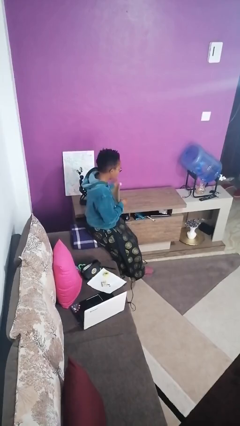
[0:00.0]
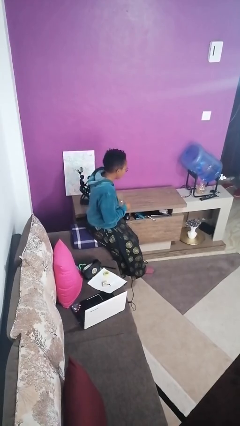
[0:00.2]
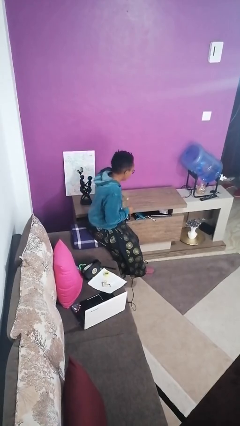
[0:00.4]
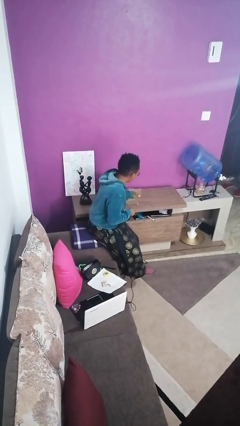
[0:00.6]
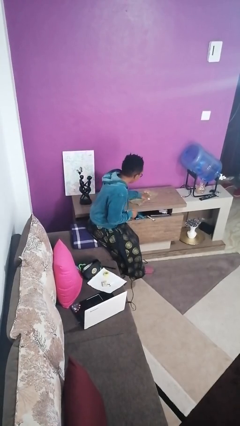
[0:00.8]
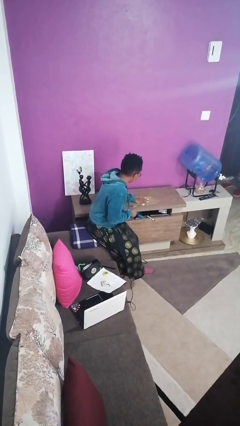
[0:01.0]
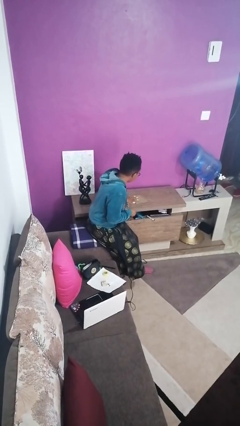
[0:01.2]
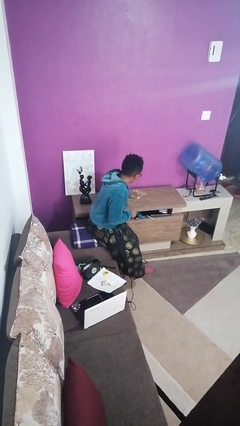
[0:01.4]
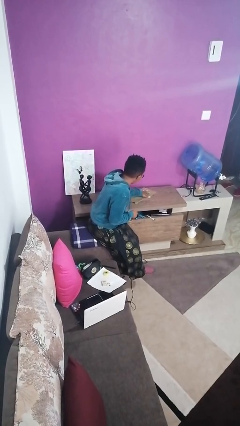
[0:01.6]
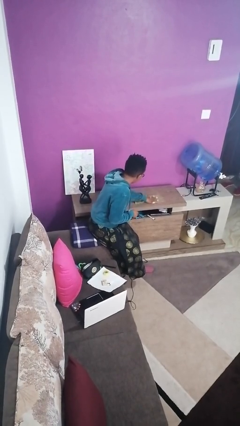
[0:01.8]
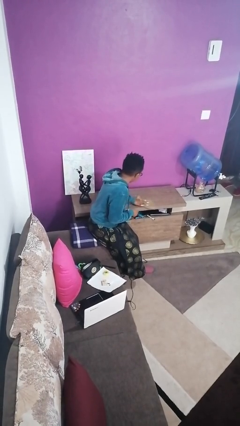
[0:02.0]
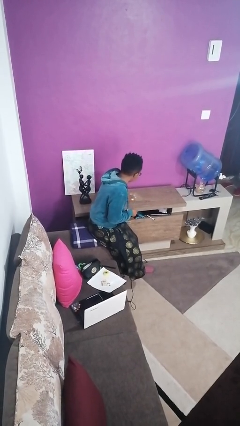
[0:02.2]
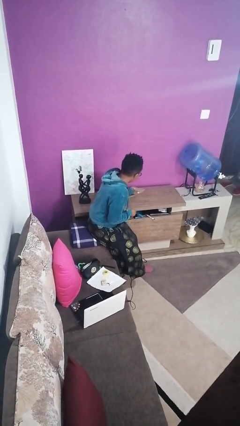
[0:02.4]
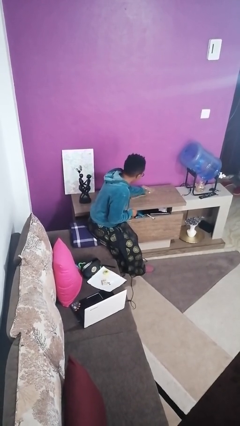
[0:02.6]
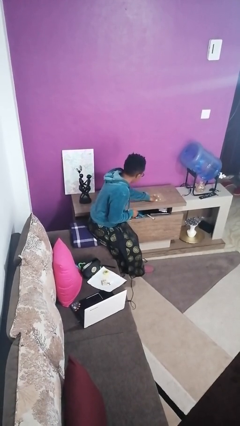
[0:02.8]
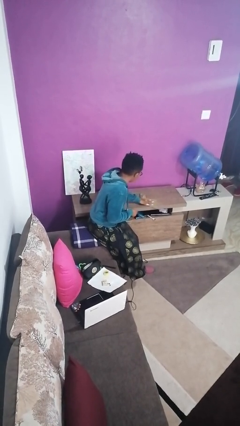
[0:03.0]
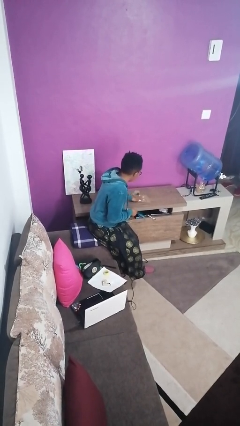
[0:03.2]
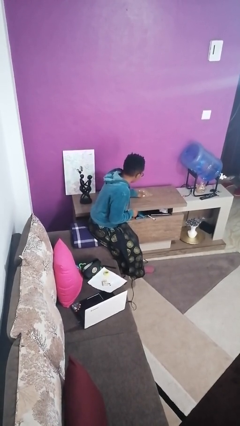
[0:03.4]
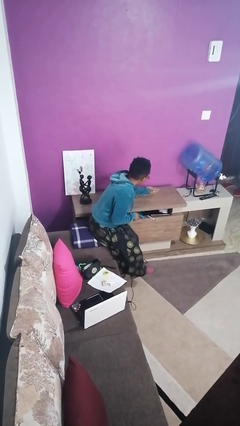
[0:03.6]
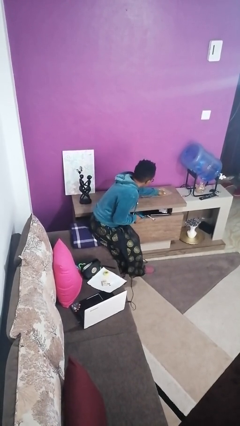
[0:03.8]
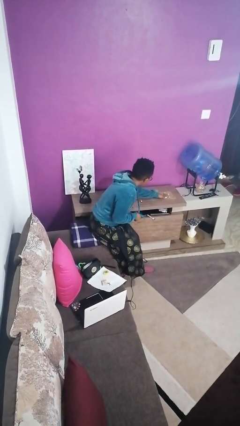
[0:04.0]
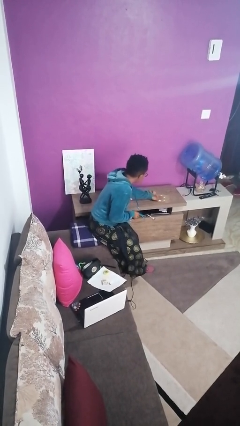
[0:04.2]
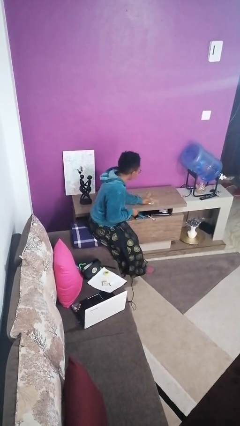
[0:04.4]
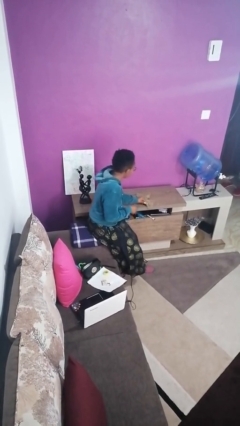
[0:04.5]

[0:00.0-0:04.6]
person cleans table with rag

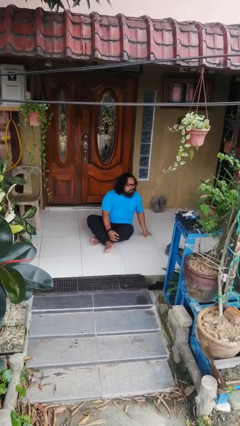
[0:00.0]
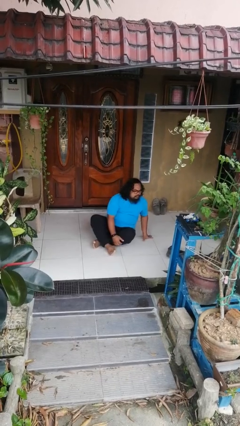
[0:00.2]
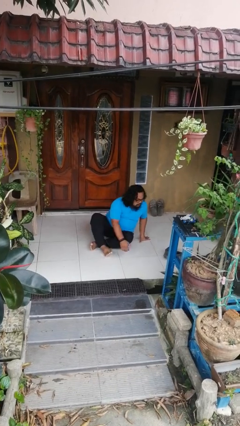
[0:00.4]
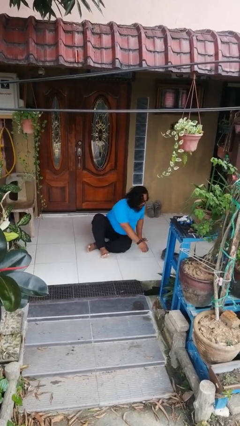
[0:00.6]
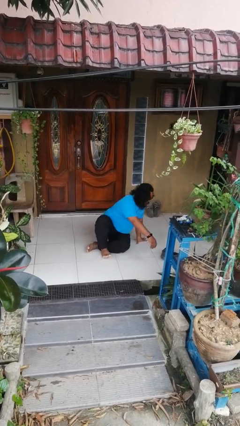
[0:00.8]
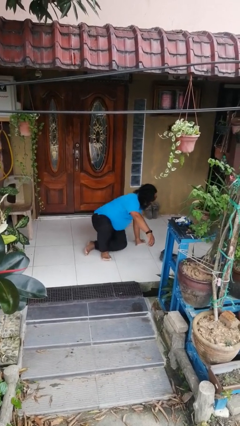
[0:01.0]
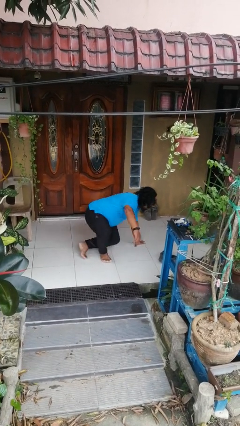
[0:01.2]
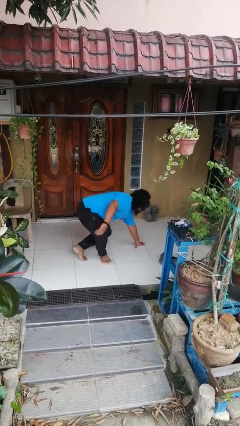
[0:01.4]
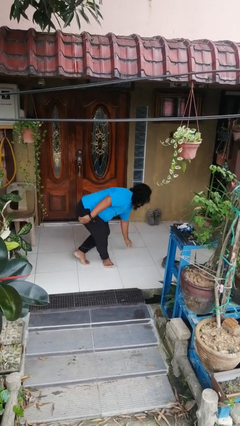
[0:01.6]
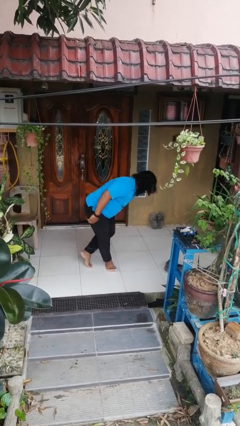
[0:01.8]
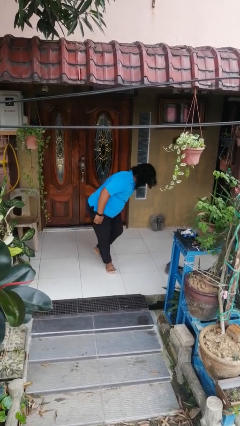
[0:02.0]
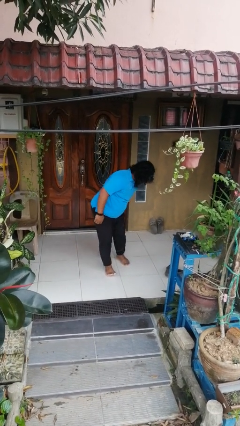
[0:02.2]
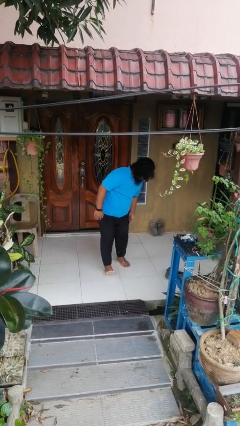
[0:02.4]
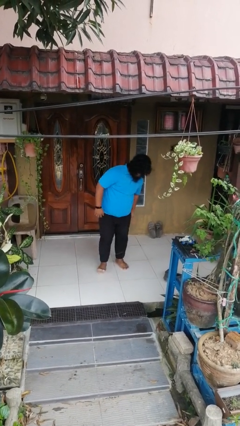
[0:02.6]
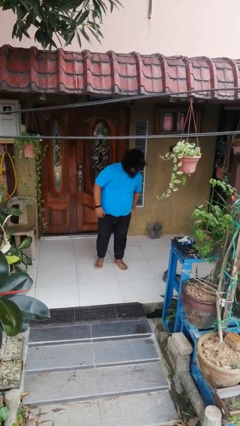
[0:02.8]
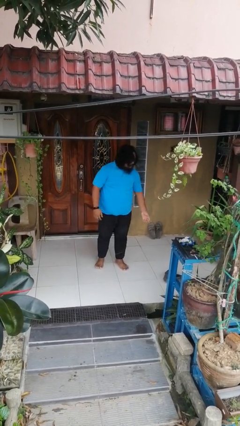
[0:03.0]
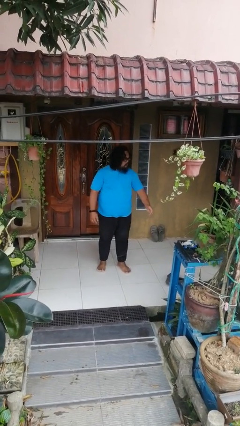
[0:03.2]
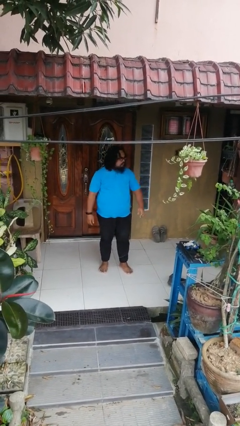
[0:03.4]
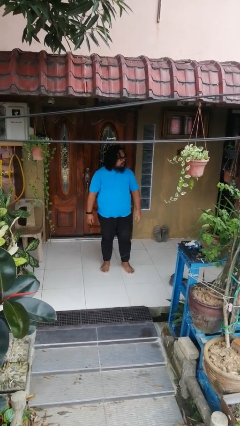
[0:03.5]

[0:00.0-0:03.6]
person stands up from floor

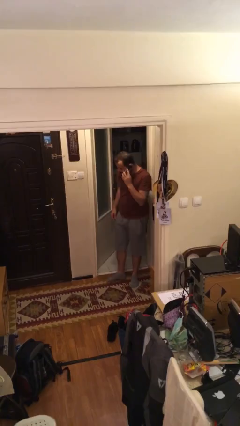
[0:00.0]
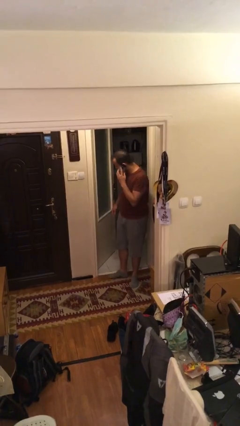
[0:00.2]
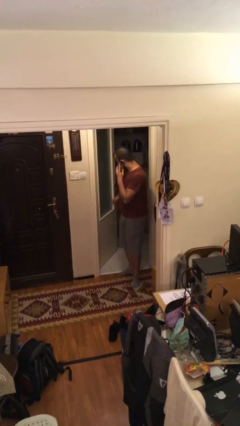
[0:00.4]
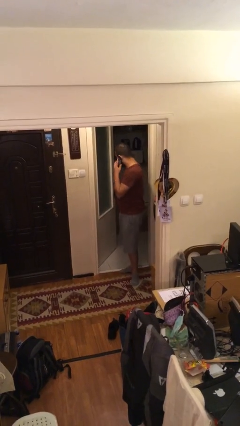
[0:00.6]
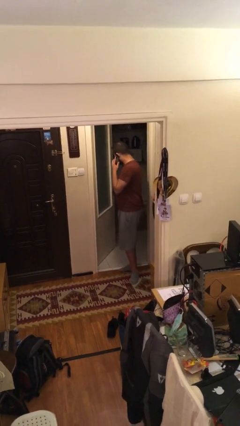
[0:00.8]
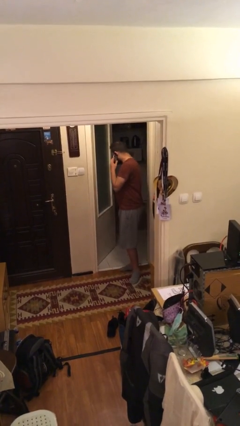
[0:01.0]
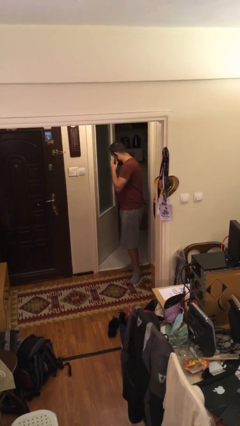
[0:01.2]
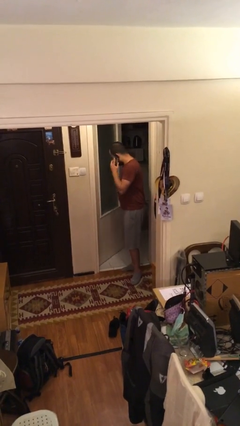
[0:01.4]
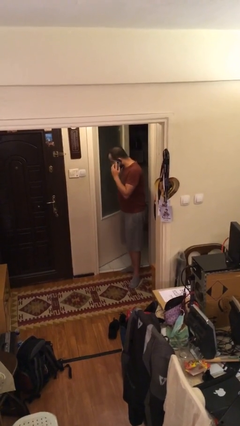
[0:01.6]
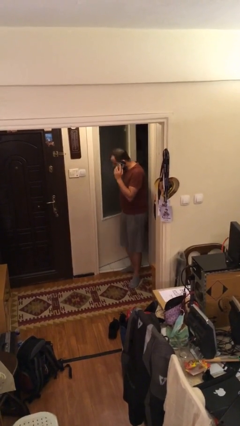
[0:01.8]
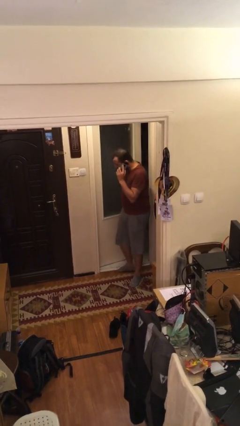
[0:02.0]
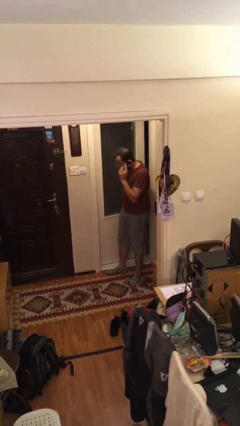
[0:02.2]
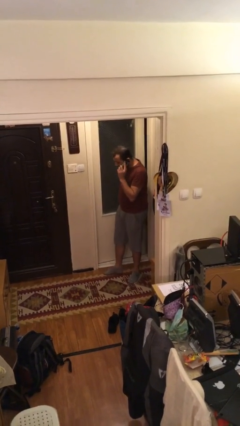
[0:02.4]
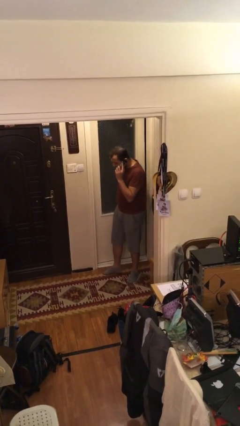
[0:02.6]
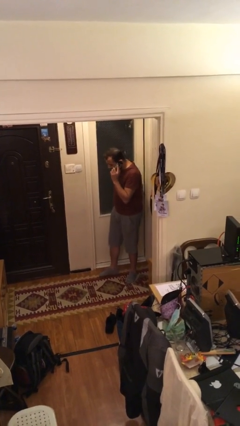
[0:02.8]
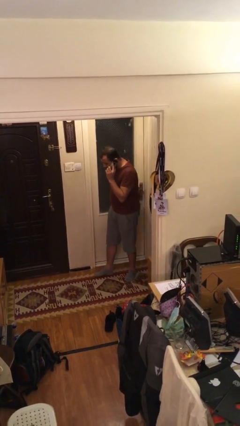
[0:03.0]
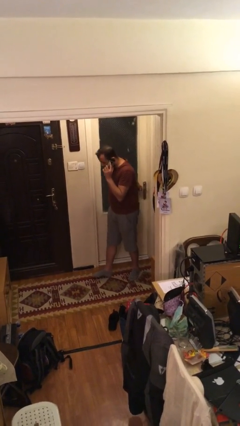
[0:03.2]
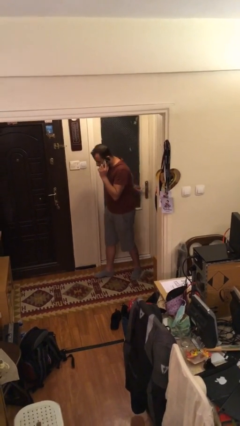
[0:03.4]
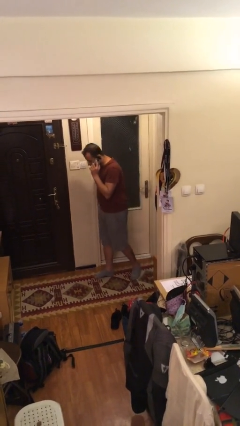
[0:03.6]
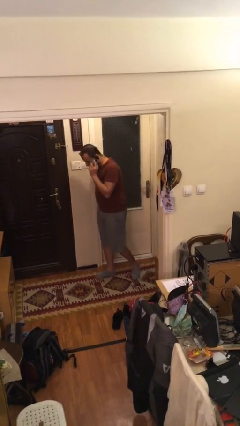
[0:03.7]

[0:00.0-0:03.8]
person closes facility door

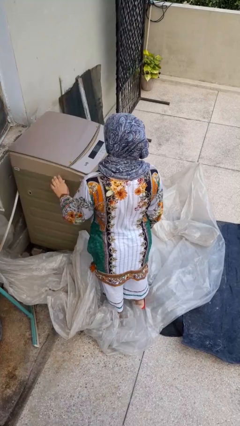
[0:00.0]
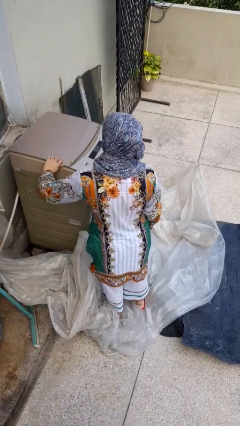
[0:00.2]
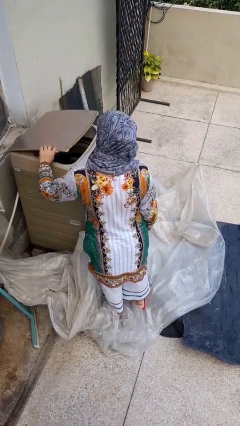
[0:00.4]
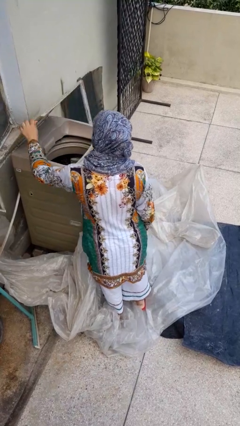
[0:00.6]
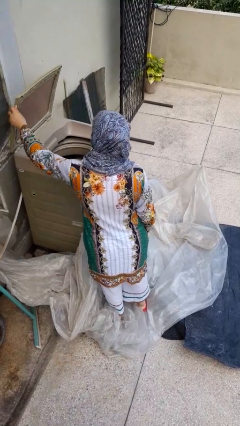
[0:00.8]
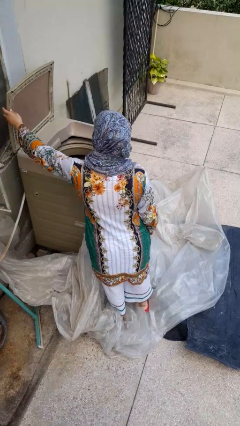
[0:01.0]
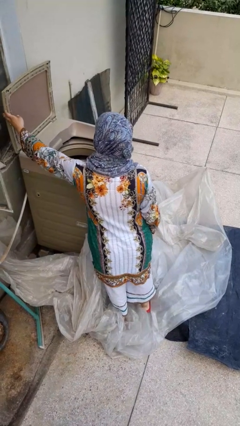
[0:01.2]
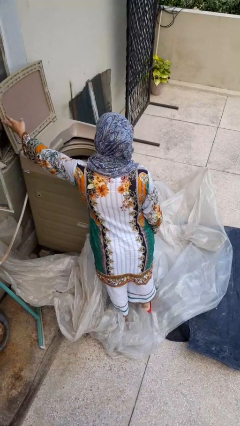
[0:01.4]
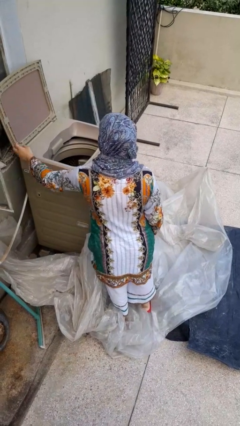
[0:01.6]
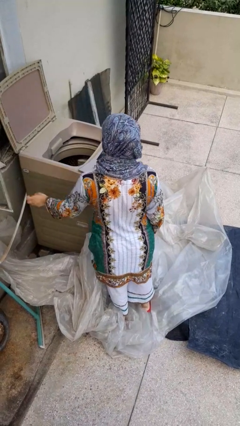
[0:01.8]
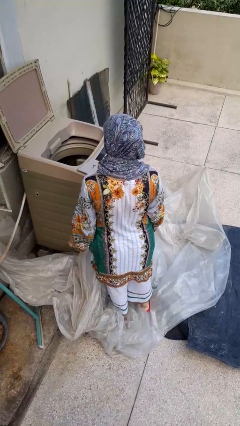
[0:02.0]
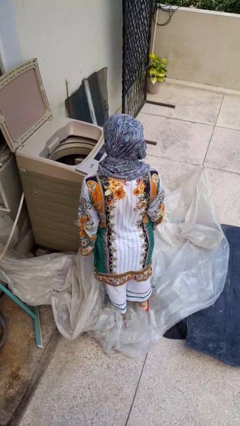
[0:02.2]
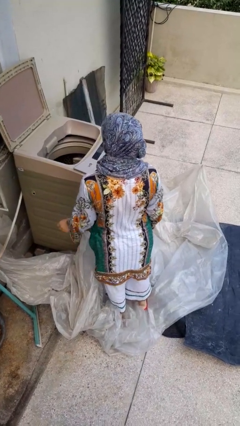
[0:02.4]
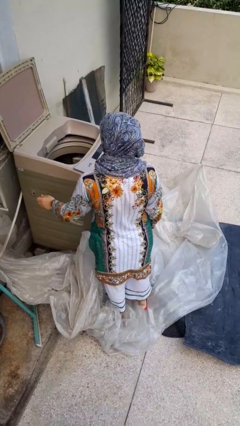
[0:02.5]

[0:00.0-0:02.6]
person opens clothes washer

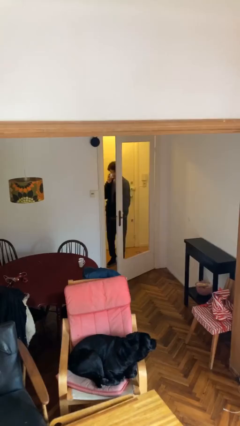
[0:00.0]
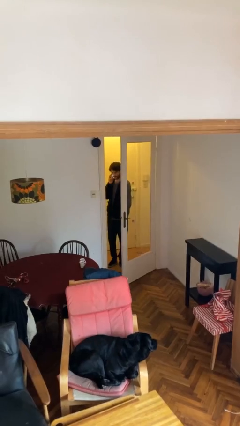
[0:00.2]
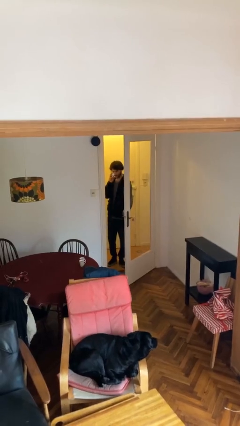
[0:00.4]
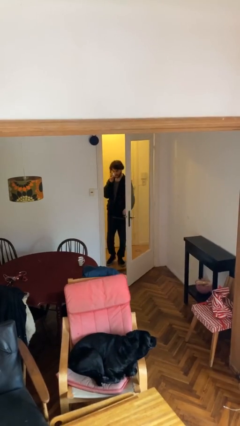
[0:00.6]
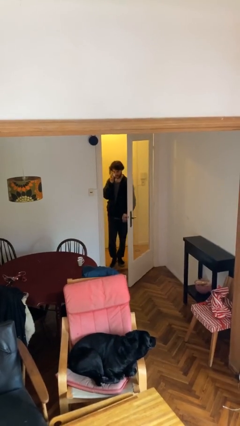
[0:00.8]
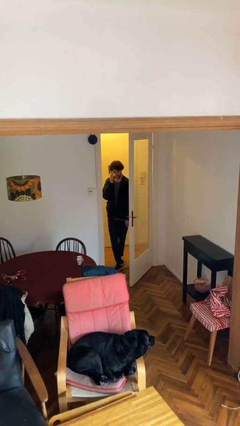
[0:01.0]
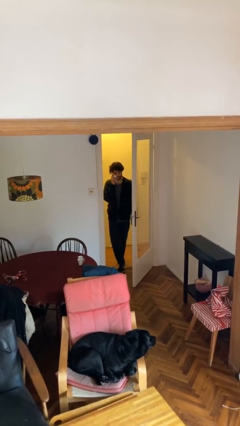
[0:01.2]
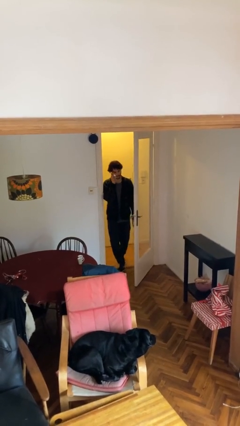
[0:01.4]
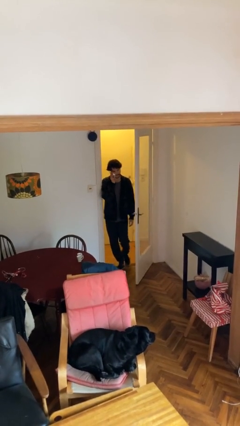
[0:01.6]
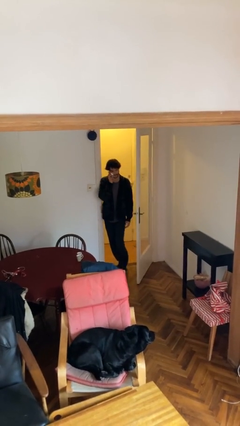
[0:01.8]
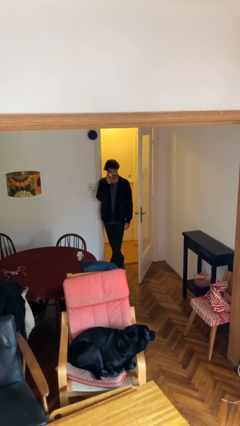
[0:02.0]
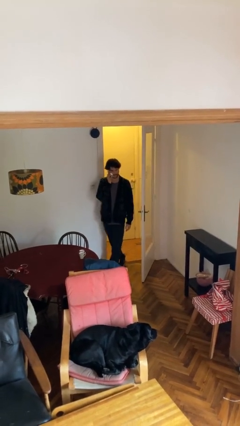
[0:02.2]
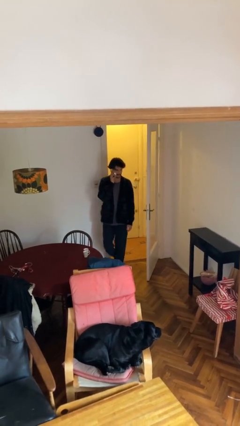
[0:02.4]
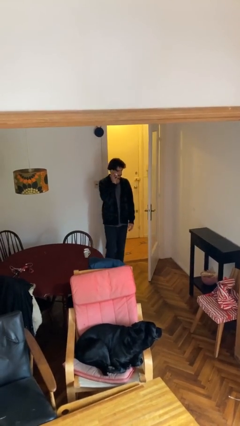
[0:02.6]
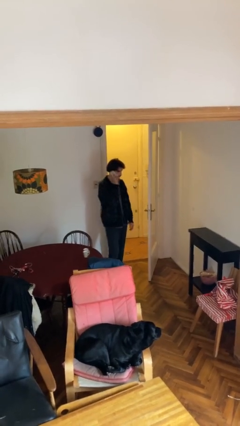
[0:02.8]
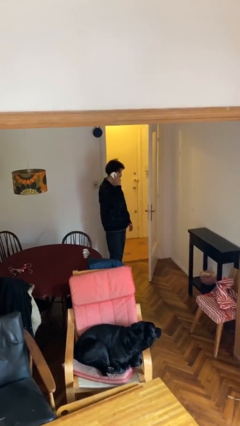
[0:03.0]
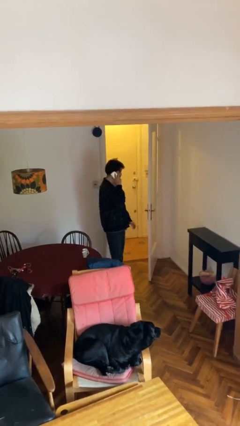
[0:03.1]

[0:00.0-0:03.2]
person enters scene through structure
